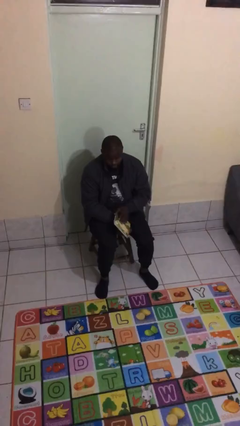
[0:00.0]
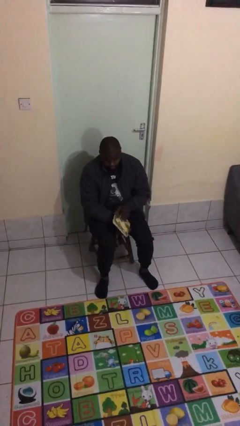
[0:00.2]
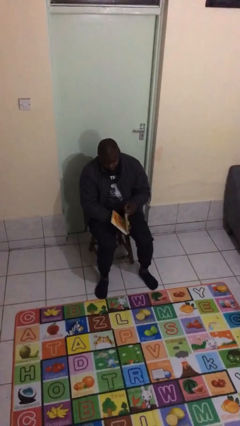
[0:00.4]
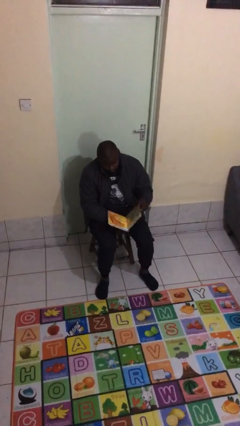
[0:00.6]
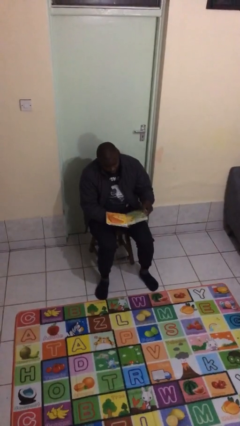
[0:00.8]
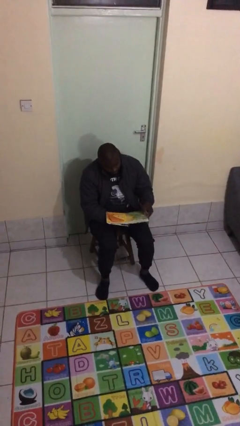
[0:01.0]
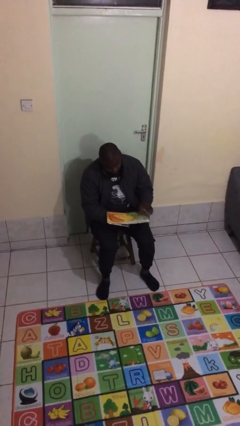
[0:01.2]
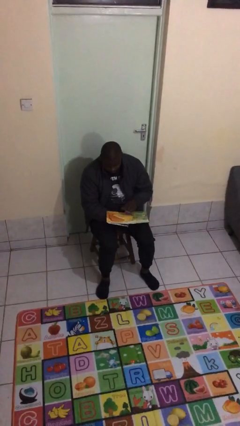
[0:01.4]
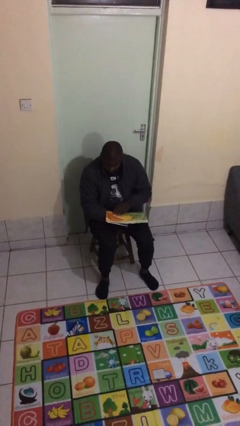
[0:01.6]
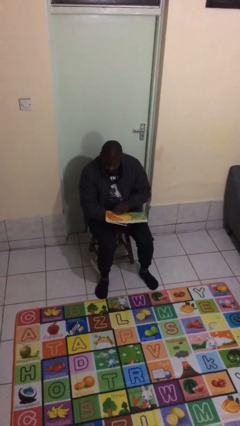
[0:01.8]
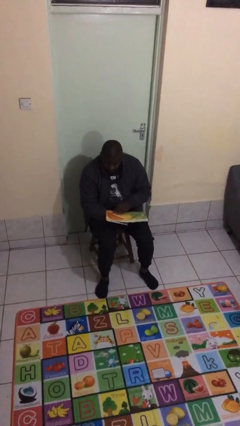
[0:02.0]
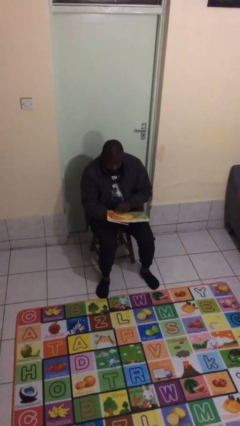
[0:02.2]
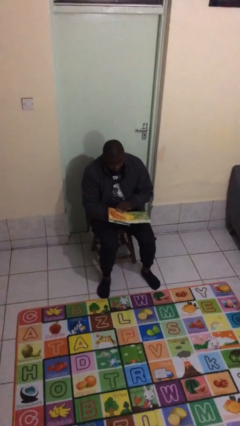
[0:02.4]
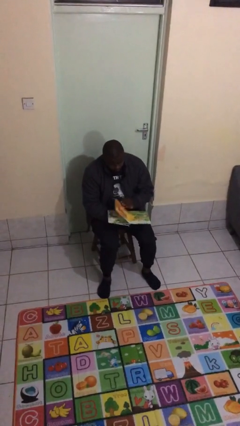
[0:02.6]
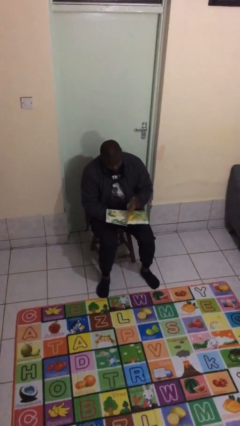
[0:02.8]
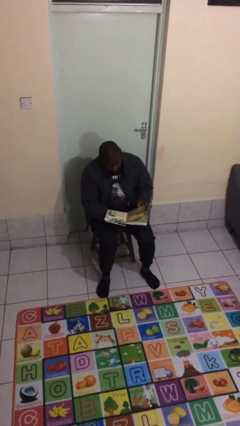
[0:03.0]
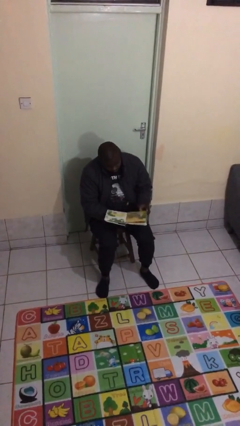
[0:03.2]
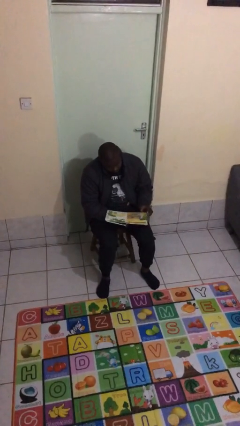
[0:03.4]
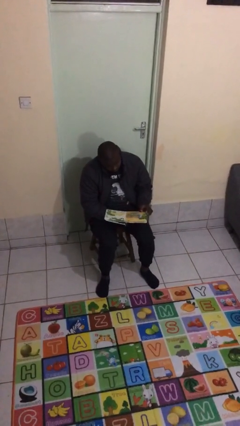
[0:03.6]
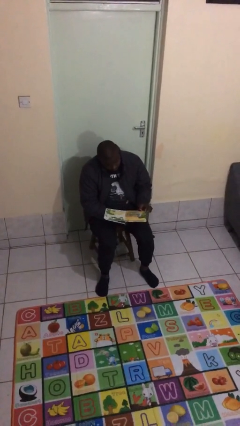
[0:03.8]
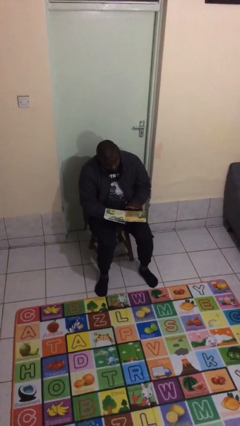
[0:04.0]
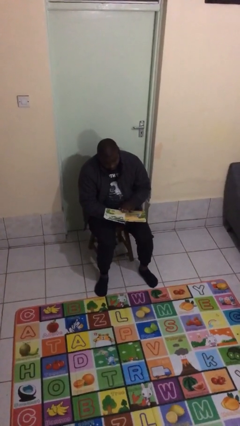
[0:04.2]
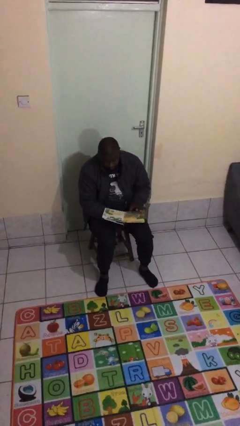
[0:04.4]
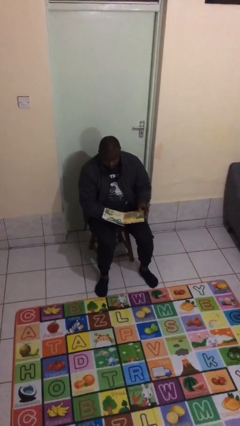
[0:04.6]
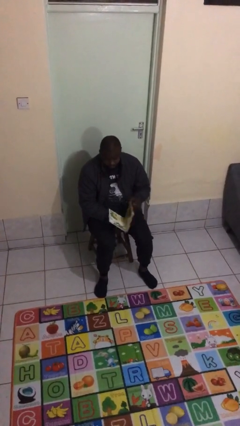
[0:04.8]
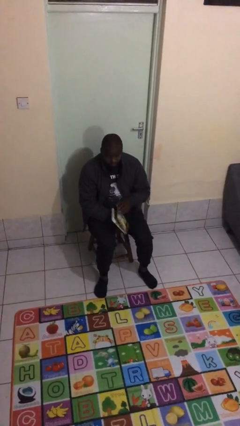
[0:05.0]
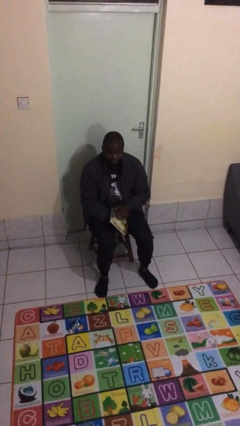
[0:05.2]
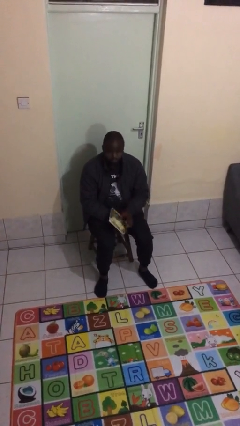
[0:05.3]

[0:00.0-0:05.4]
person reads book

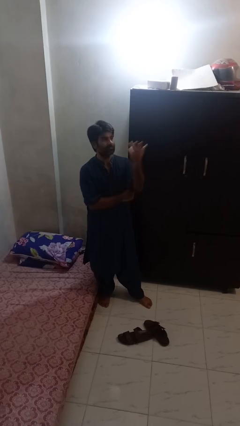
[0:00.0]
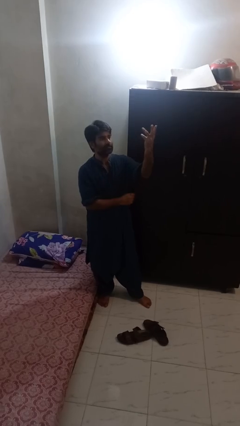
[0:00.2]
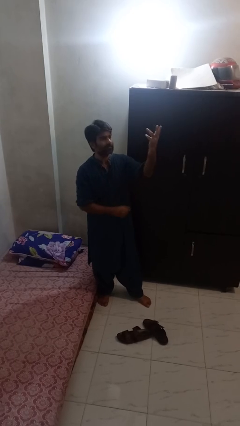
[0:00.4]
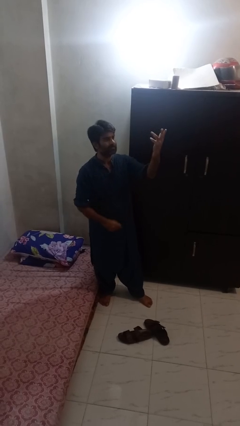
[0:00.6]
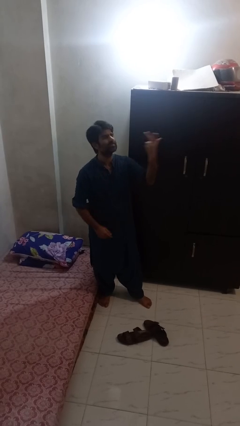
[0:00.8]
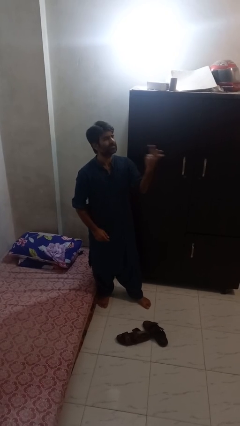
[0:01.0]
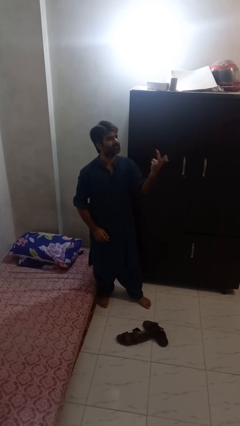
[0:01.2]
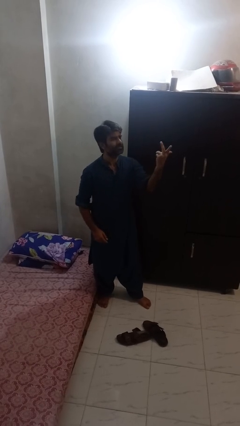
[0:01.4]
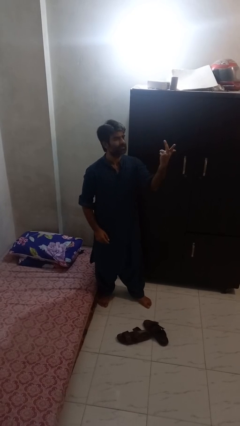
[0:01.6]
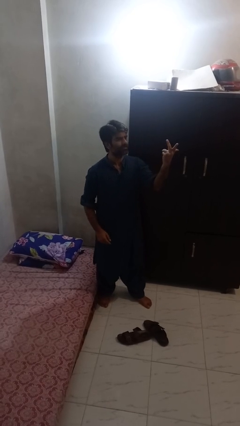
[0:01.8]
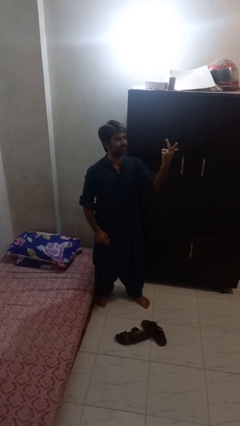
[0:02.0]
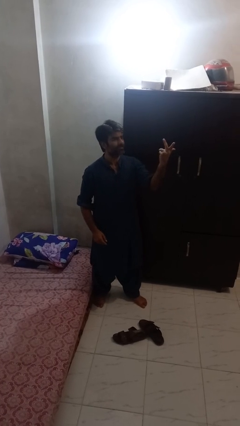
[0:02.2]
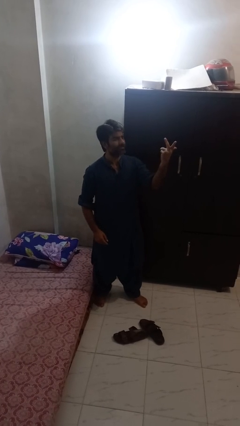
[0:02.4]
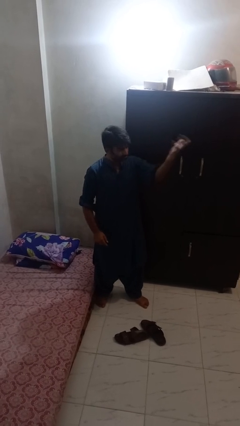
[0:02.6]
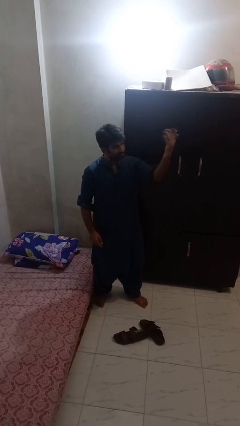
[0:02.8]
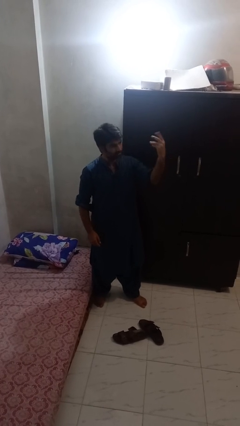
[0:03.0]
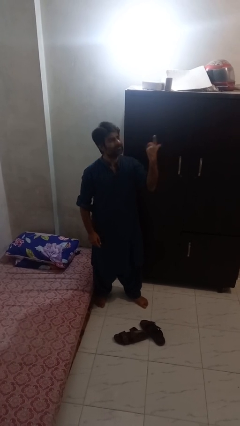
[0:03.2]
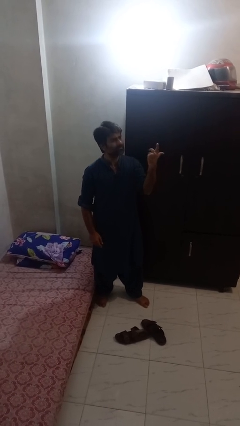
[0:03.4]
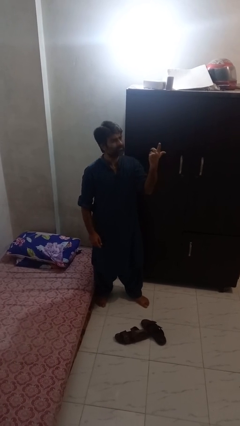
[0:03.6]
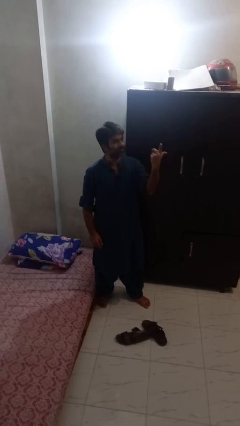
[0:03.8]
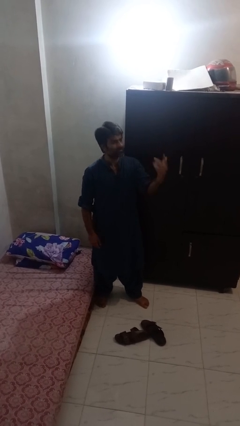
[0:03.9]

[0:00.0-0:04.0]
person gestures raise hand

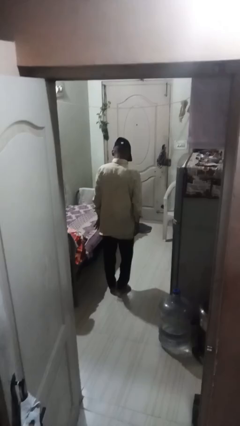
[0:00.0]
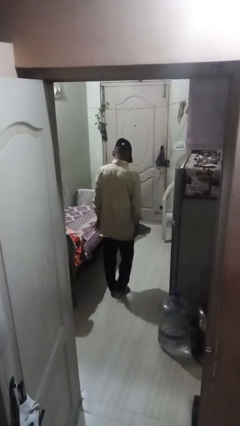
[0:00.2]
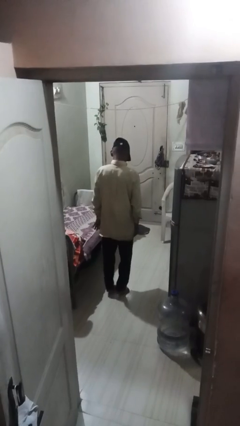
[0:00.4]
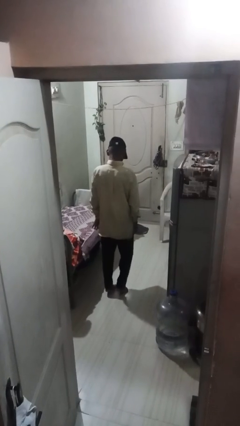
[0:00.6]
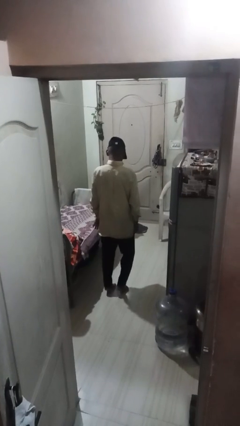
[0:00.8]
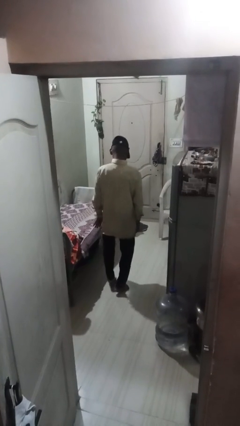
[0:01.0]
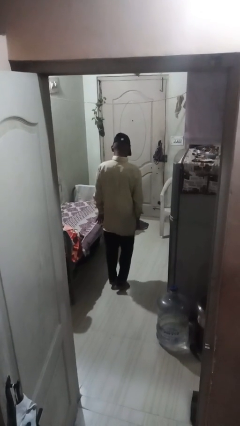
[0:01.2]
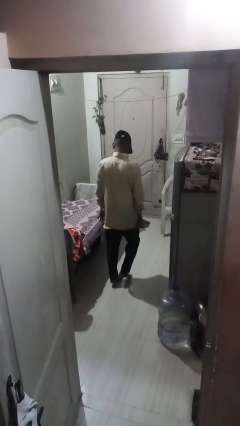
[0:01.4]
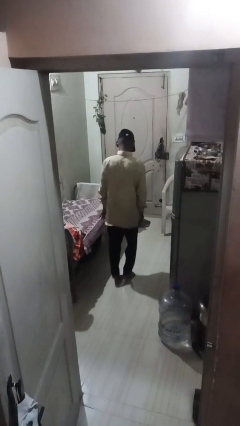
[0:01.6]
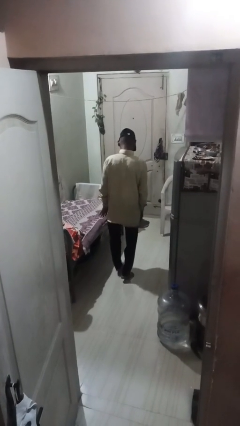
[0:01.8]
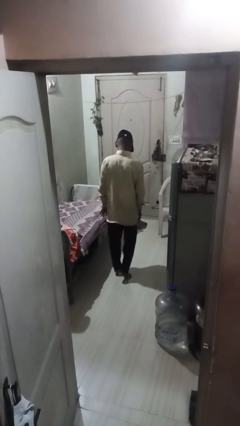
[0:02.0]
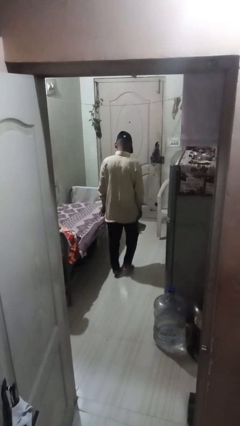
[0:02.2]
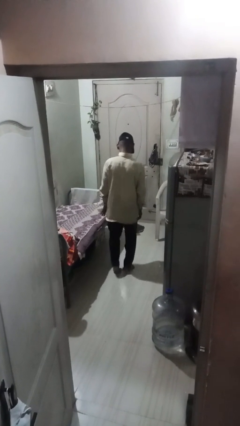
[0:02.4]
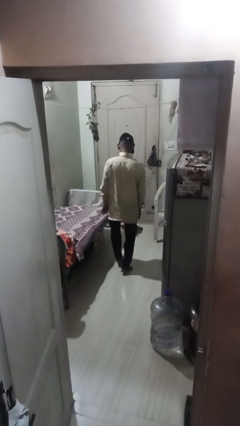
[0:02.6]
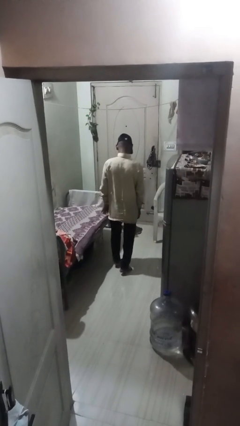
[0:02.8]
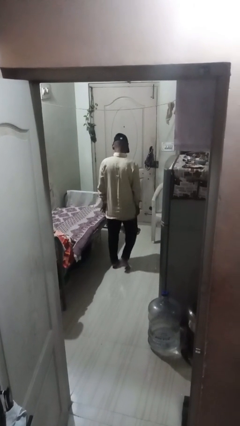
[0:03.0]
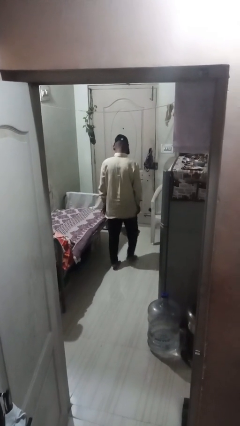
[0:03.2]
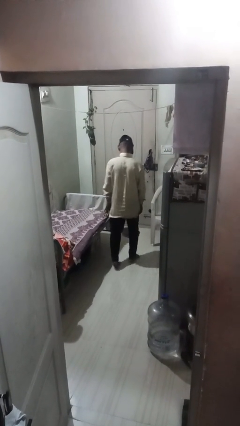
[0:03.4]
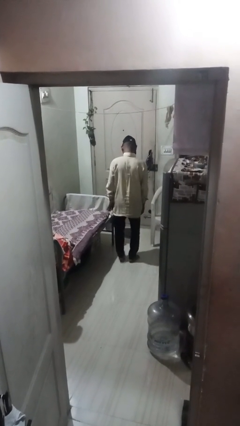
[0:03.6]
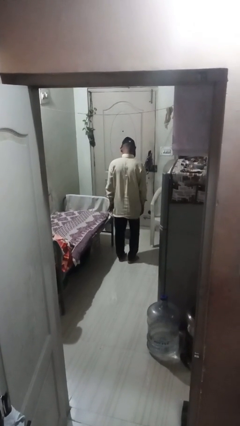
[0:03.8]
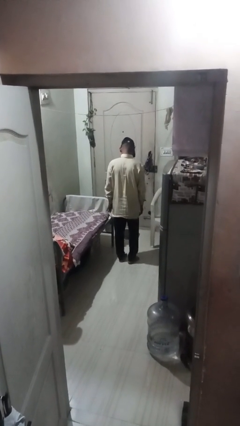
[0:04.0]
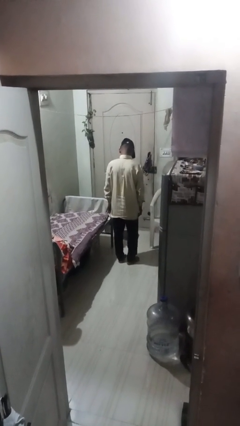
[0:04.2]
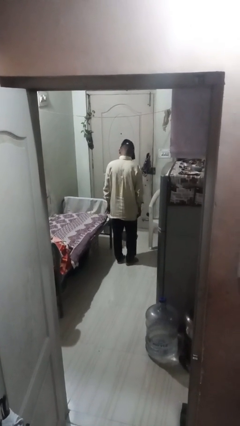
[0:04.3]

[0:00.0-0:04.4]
person walks tiptoe

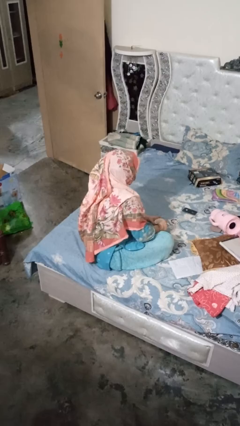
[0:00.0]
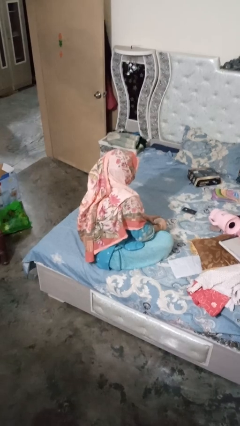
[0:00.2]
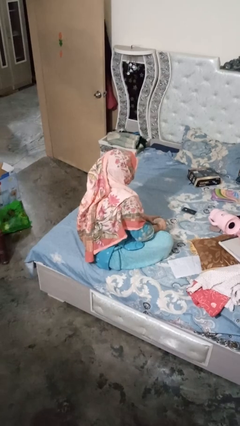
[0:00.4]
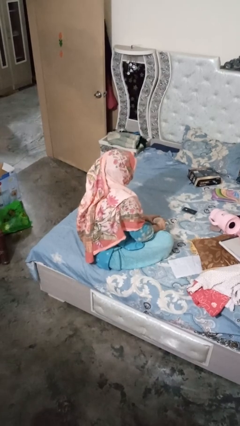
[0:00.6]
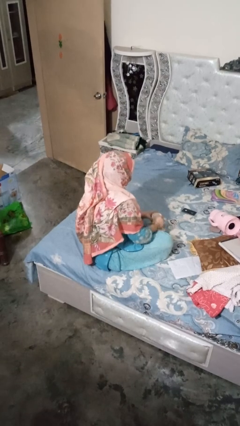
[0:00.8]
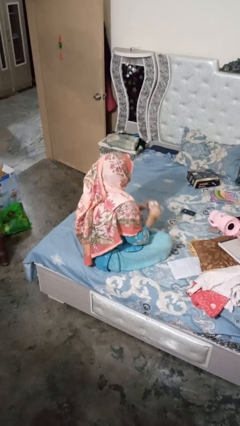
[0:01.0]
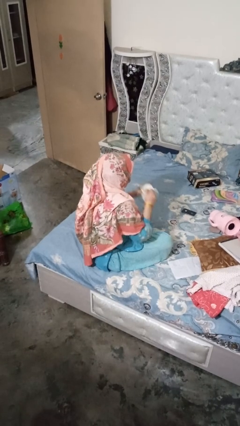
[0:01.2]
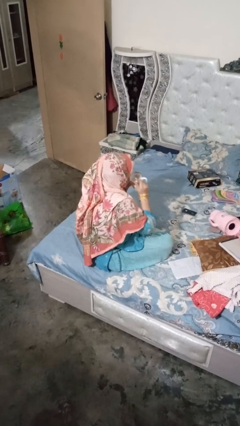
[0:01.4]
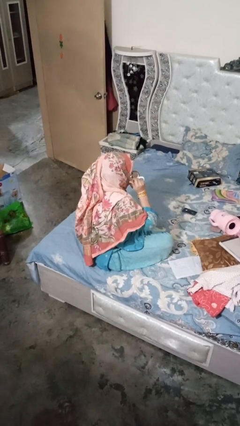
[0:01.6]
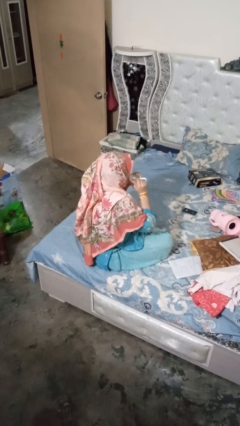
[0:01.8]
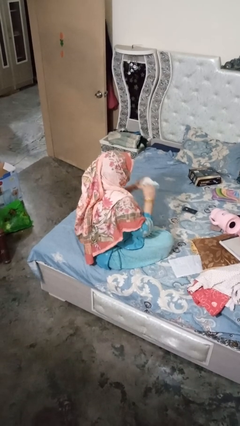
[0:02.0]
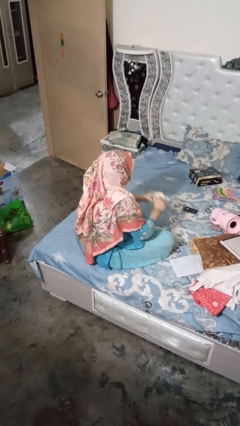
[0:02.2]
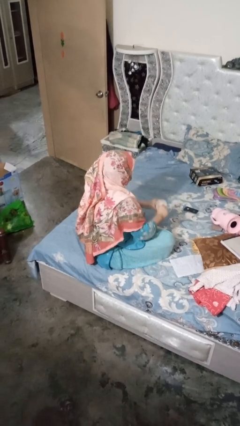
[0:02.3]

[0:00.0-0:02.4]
person drinks from mug

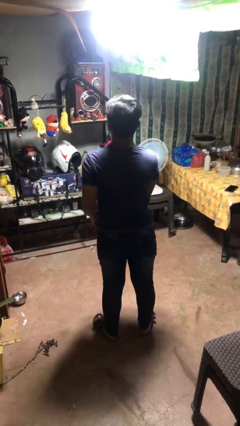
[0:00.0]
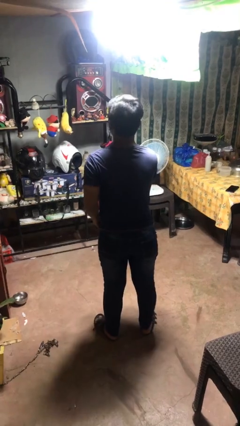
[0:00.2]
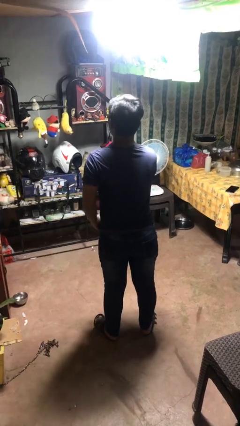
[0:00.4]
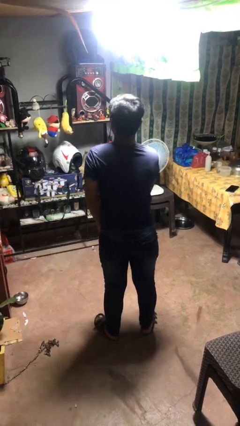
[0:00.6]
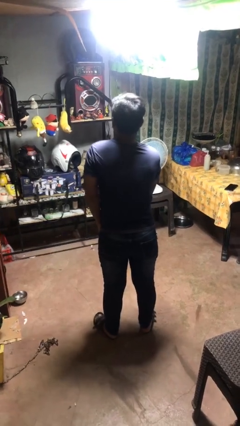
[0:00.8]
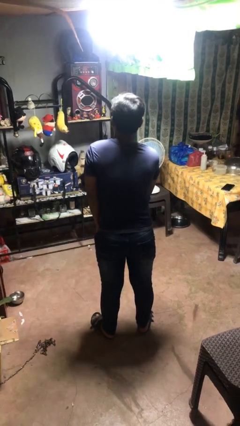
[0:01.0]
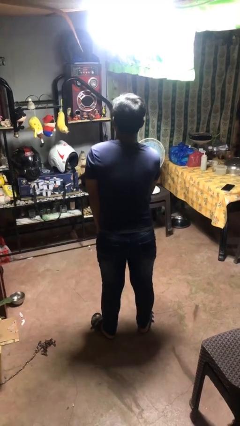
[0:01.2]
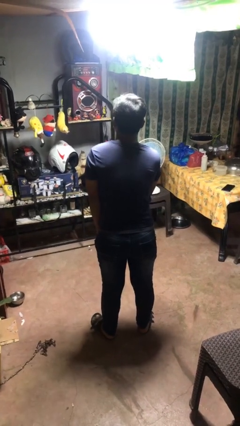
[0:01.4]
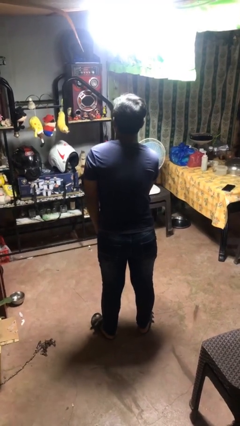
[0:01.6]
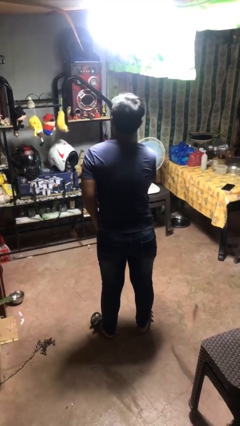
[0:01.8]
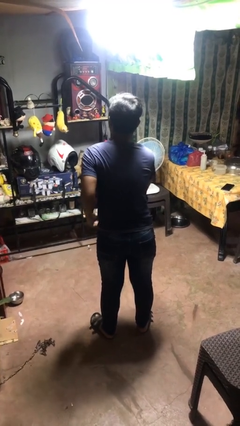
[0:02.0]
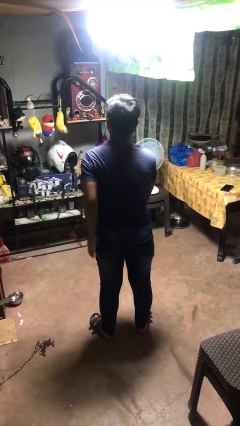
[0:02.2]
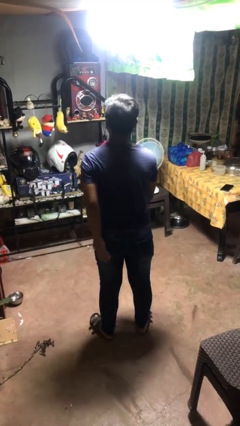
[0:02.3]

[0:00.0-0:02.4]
person puts hands in back pockets
